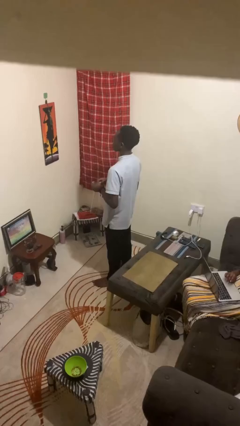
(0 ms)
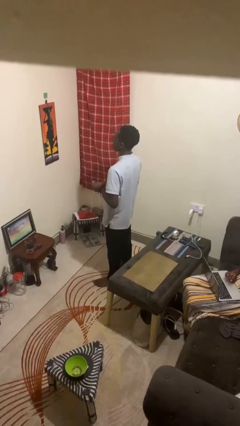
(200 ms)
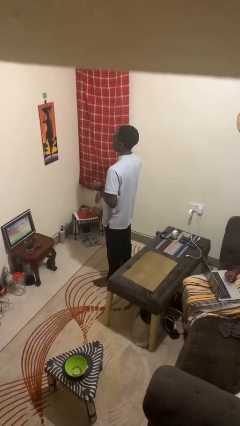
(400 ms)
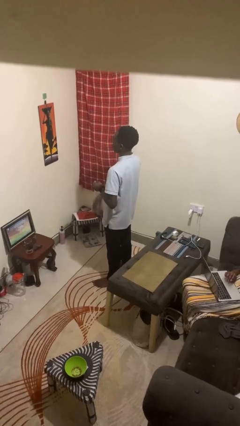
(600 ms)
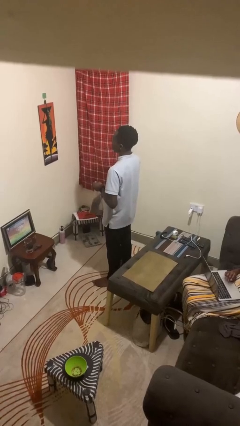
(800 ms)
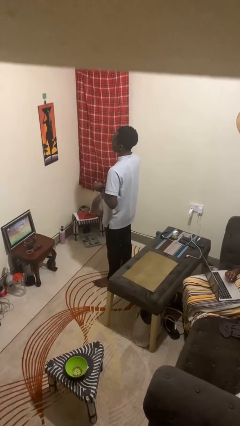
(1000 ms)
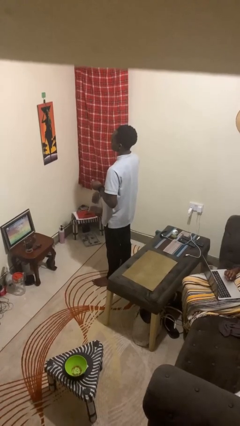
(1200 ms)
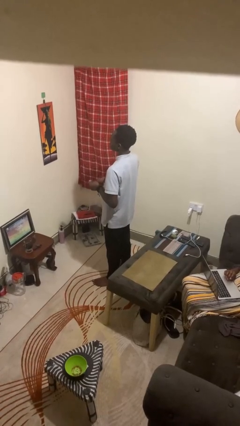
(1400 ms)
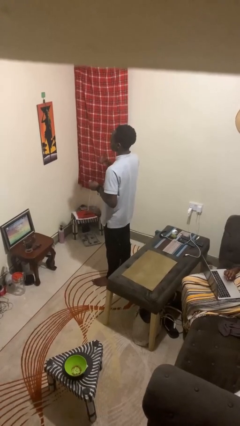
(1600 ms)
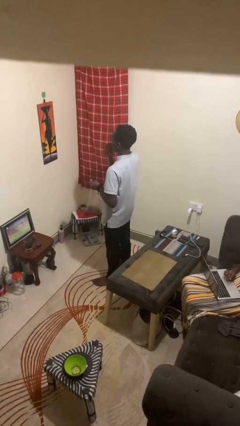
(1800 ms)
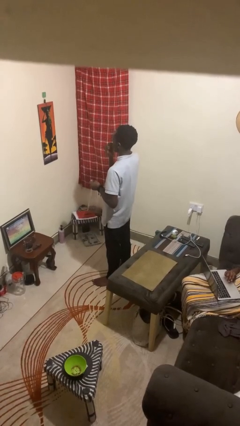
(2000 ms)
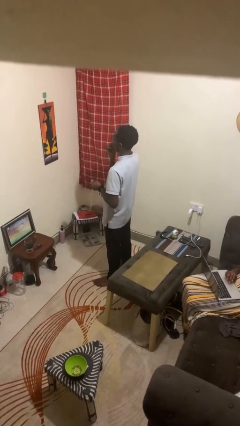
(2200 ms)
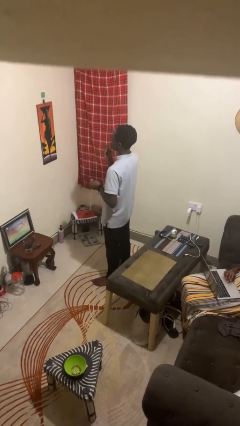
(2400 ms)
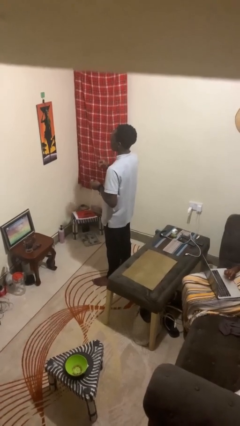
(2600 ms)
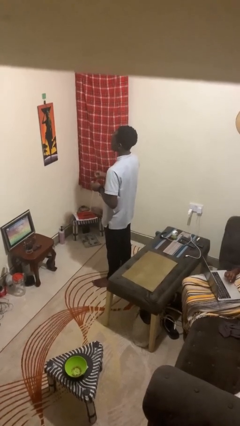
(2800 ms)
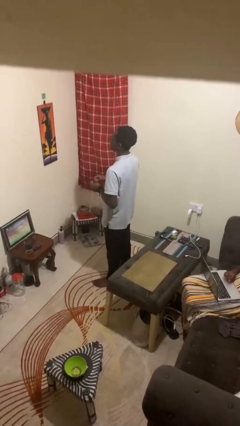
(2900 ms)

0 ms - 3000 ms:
person eats snack from bag

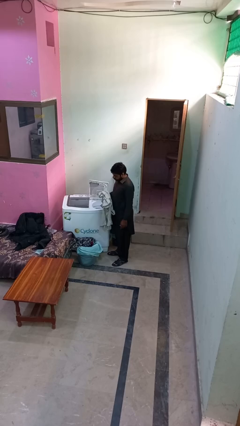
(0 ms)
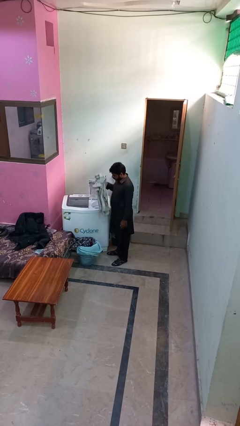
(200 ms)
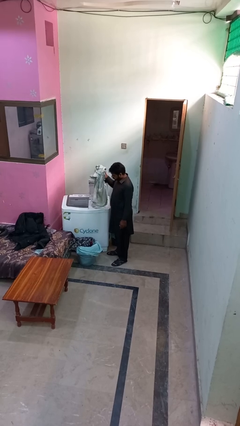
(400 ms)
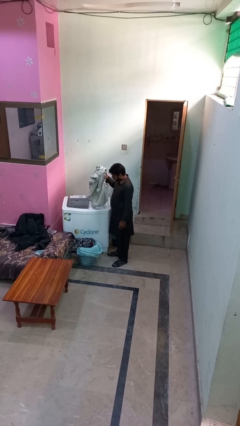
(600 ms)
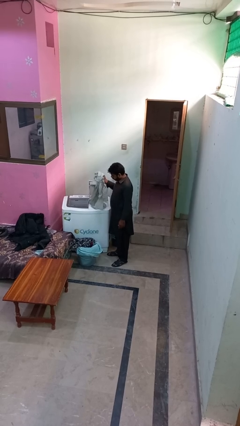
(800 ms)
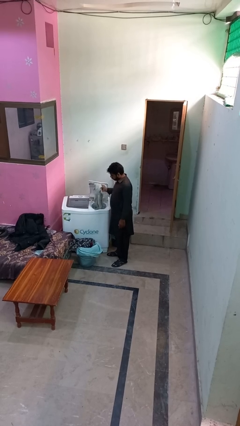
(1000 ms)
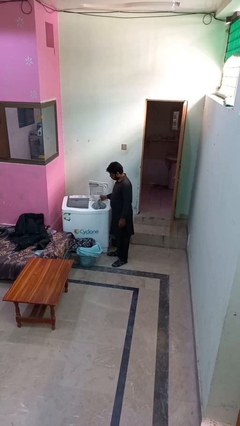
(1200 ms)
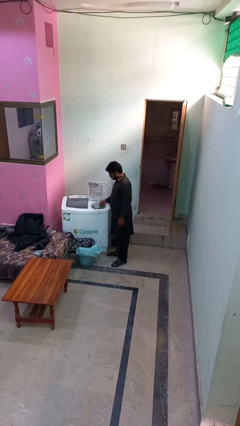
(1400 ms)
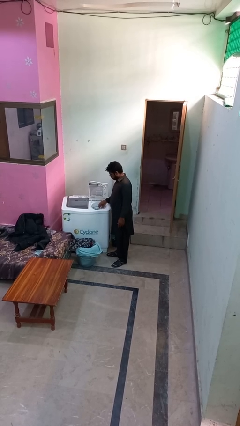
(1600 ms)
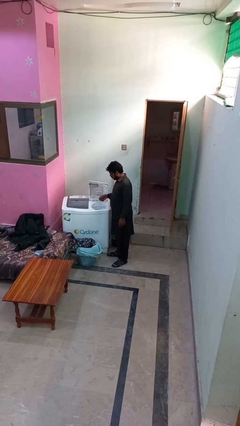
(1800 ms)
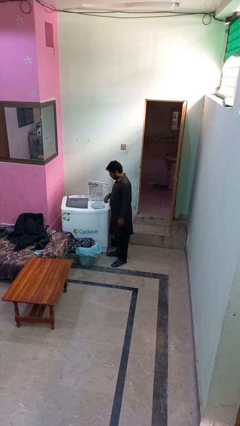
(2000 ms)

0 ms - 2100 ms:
person loads dryer

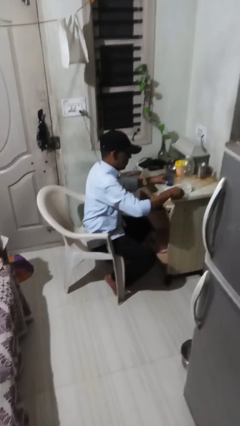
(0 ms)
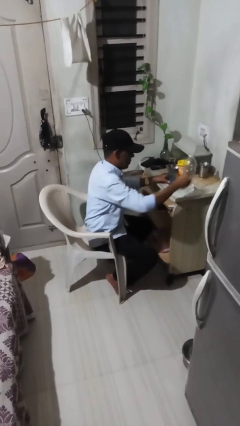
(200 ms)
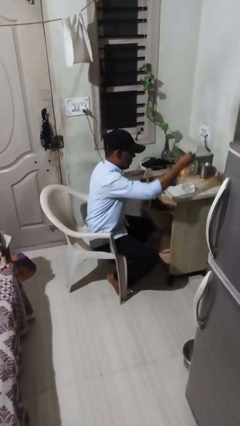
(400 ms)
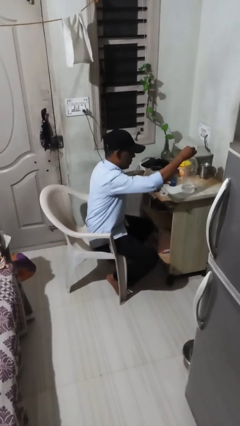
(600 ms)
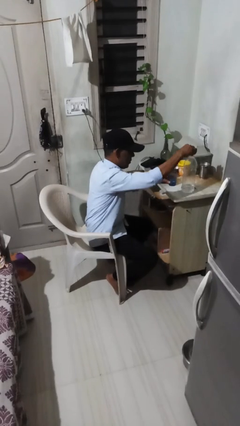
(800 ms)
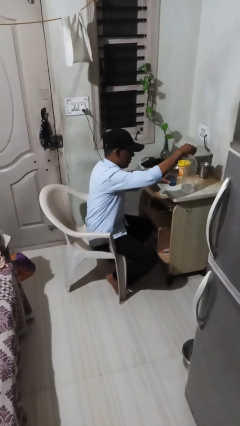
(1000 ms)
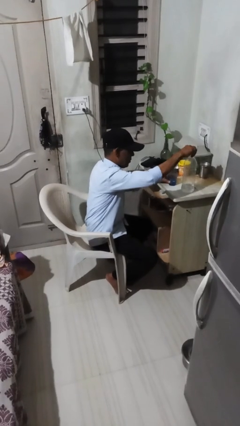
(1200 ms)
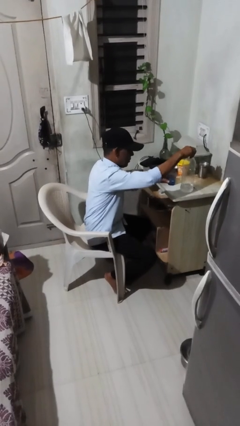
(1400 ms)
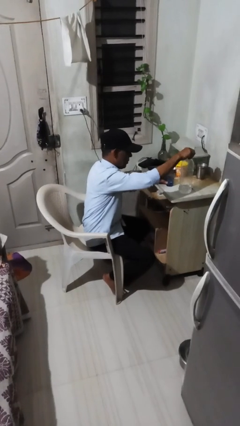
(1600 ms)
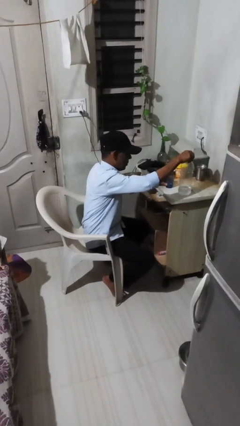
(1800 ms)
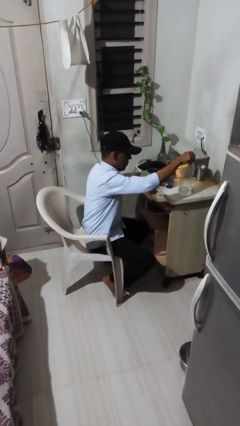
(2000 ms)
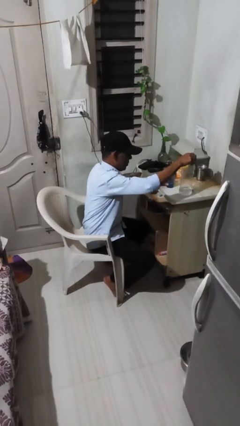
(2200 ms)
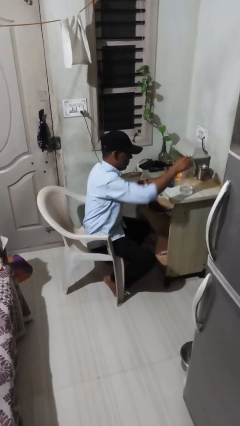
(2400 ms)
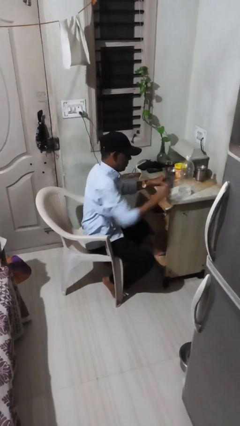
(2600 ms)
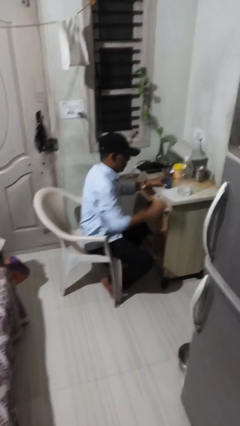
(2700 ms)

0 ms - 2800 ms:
person screws lid to bottle

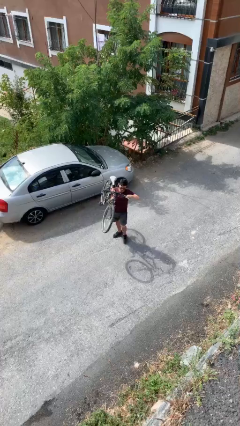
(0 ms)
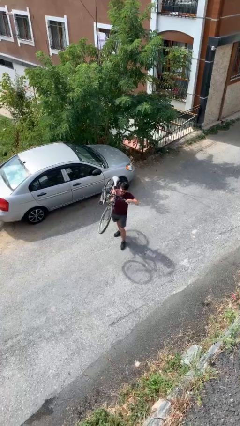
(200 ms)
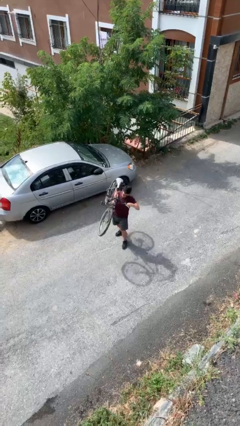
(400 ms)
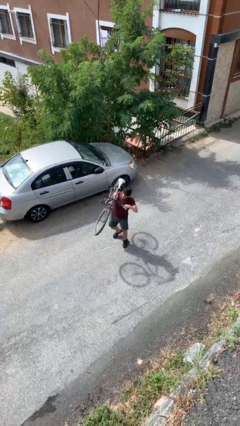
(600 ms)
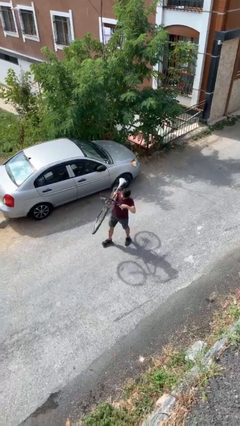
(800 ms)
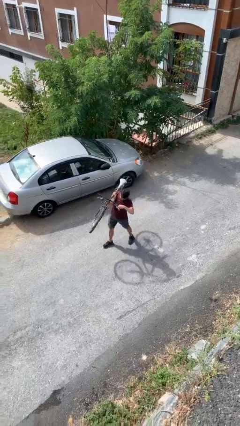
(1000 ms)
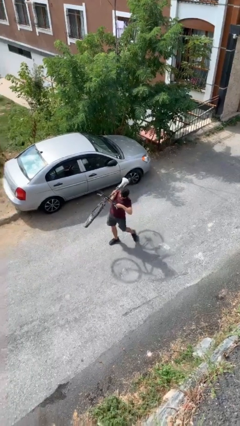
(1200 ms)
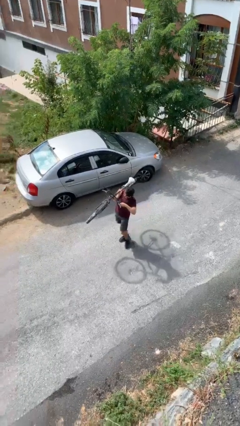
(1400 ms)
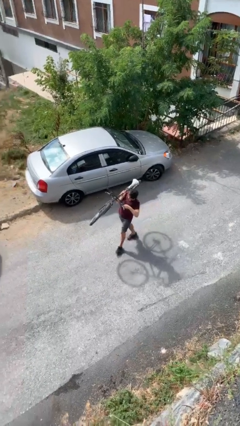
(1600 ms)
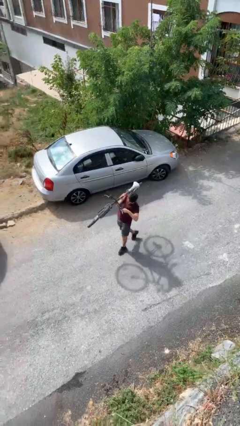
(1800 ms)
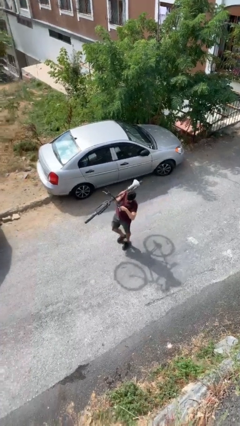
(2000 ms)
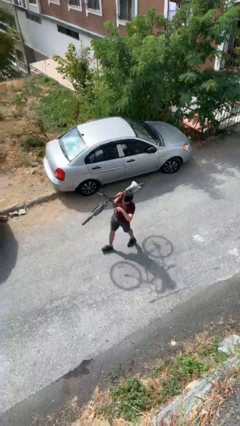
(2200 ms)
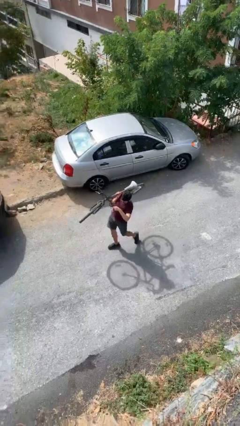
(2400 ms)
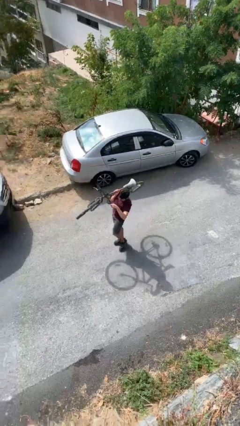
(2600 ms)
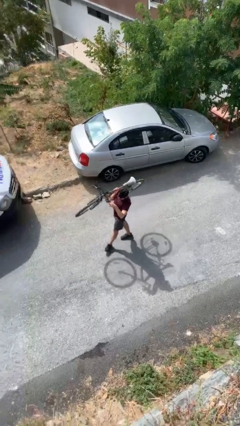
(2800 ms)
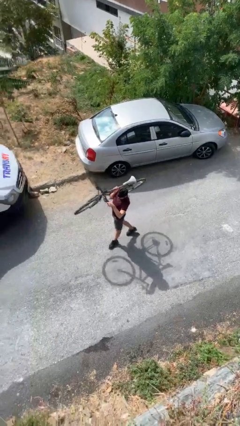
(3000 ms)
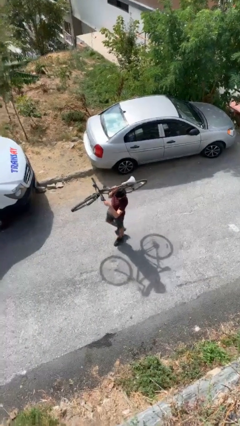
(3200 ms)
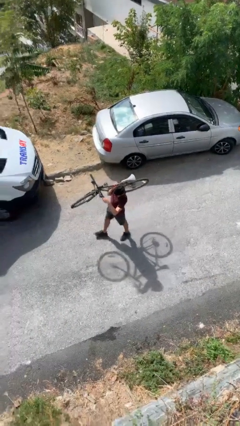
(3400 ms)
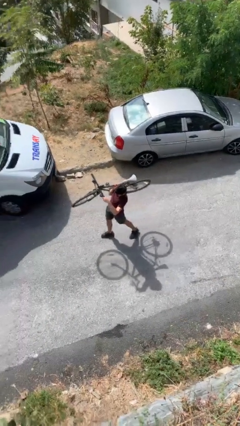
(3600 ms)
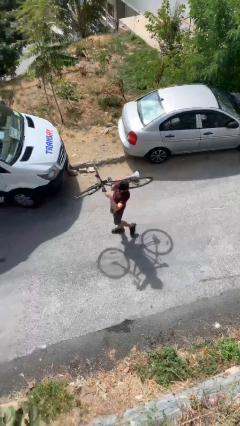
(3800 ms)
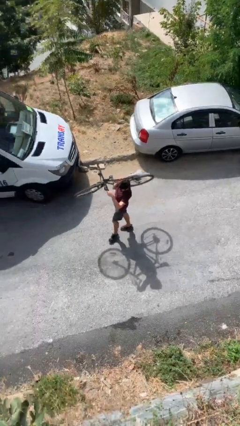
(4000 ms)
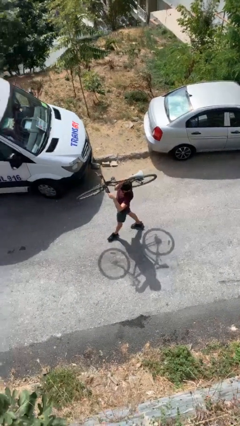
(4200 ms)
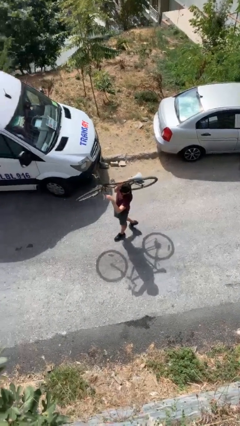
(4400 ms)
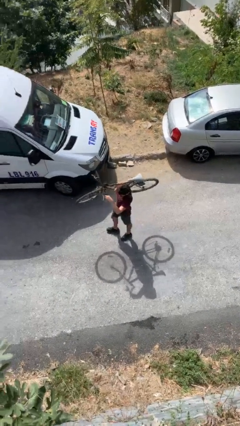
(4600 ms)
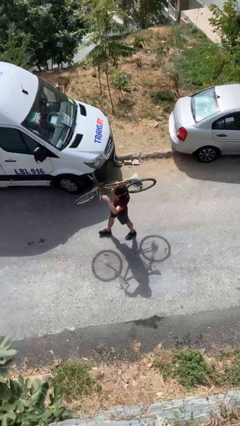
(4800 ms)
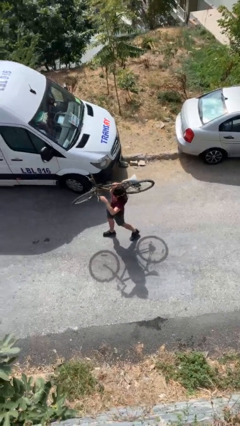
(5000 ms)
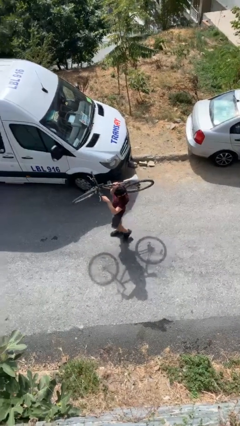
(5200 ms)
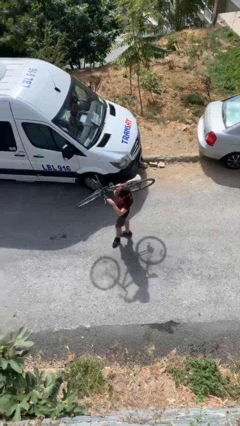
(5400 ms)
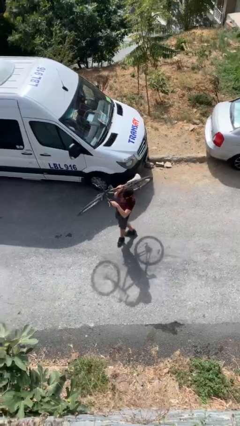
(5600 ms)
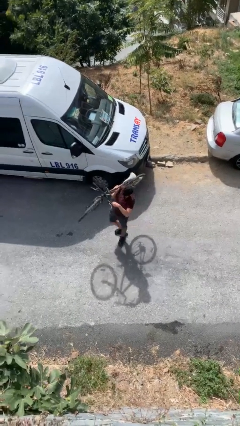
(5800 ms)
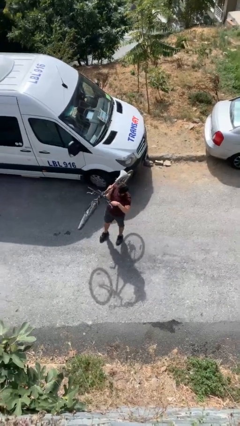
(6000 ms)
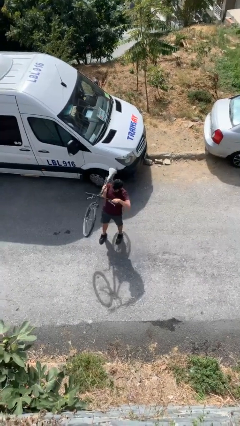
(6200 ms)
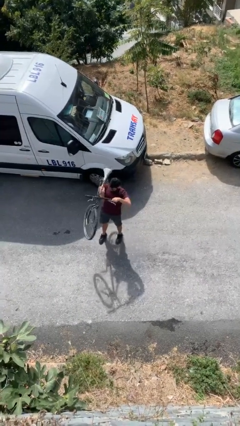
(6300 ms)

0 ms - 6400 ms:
person carries heavy object

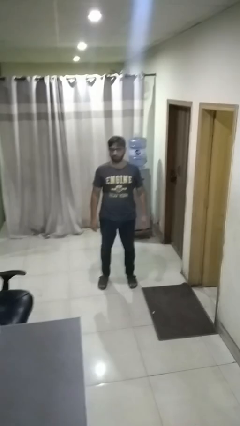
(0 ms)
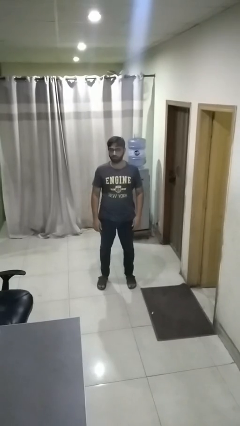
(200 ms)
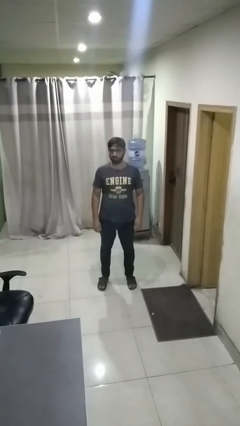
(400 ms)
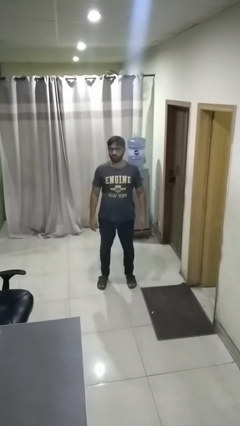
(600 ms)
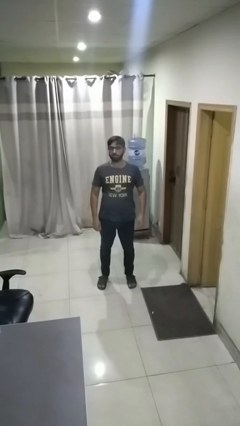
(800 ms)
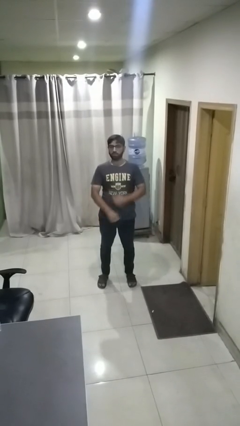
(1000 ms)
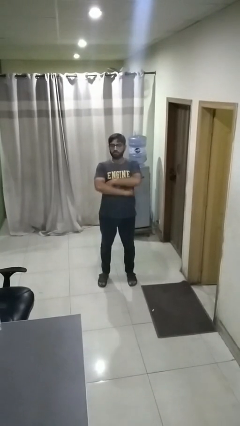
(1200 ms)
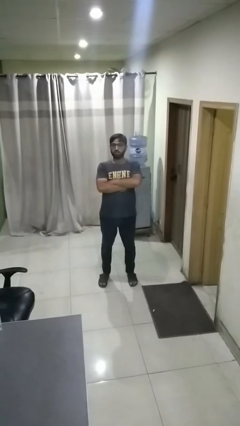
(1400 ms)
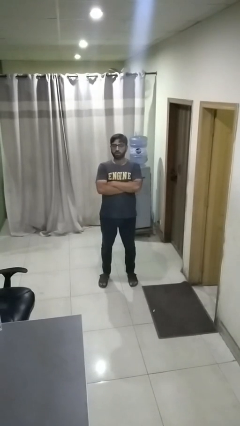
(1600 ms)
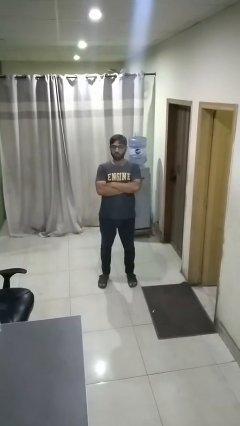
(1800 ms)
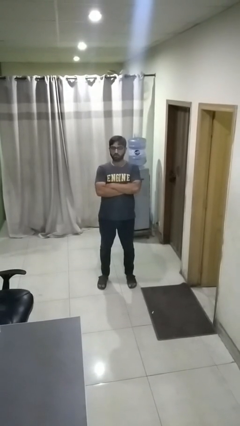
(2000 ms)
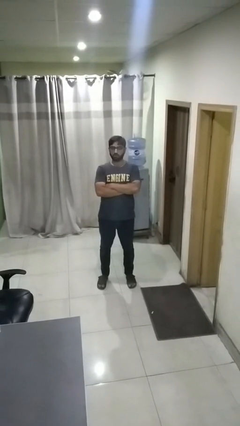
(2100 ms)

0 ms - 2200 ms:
person crosses arms

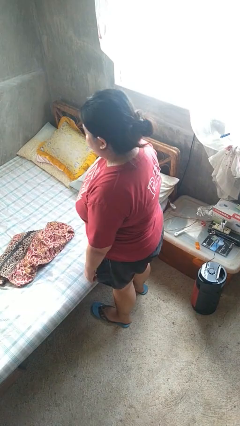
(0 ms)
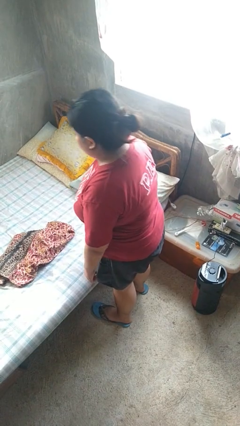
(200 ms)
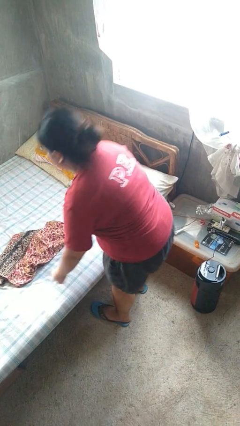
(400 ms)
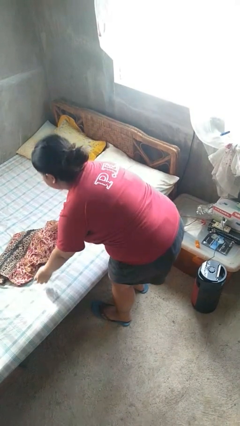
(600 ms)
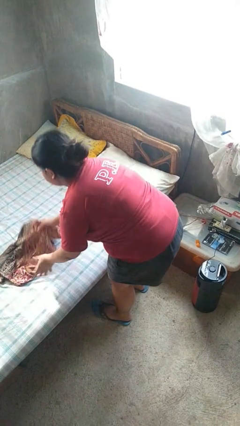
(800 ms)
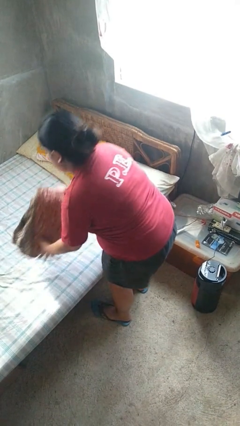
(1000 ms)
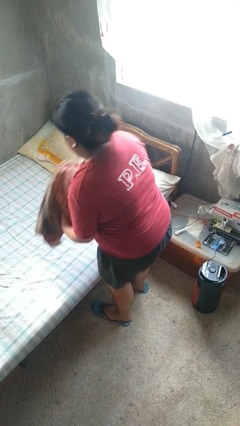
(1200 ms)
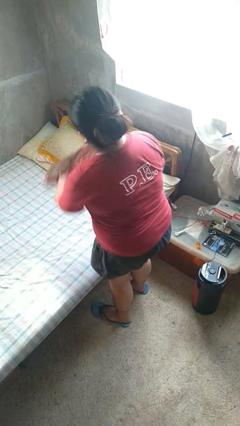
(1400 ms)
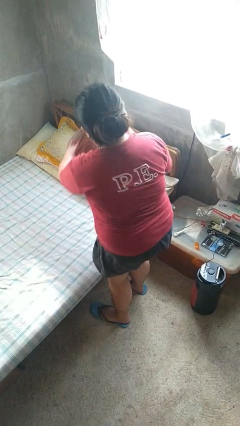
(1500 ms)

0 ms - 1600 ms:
person makes bed
